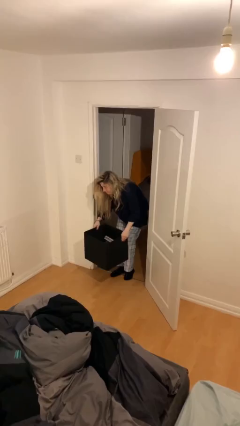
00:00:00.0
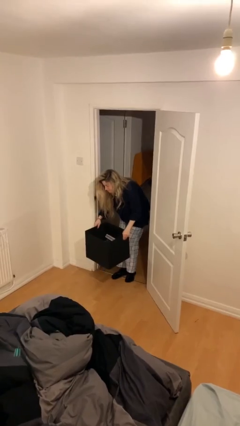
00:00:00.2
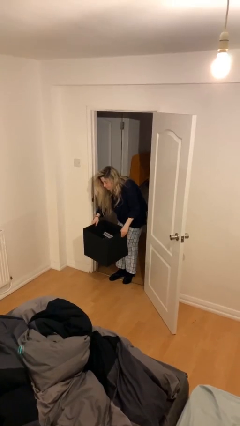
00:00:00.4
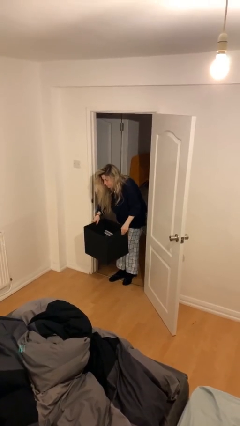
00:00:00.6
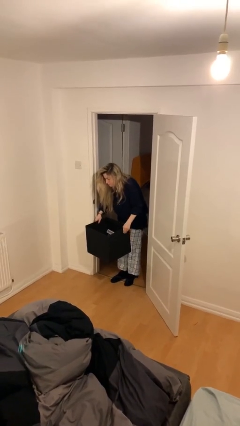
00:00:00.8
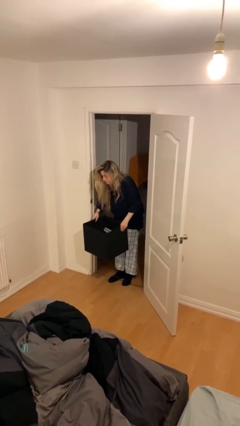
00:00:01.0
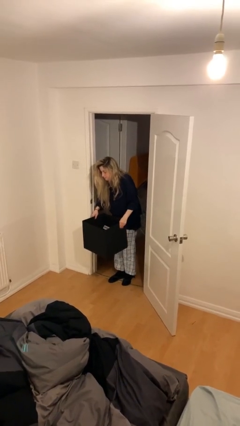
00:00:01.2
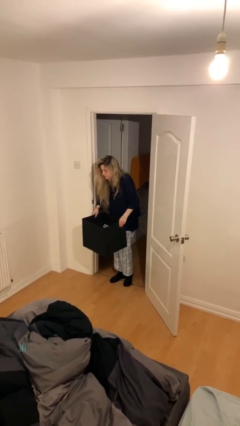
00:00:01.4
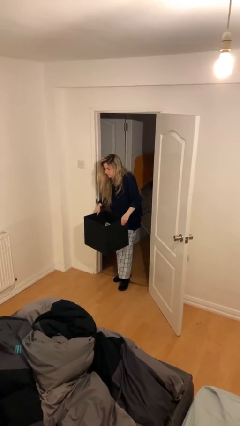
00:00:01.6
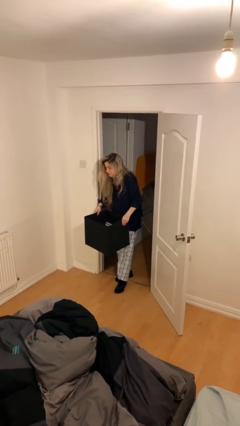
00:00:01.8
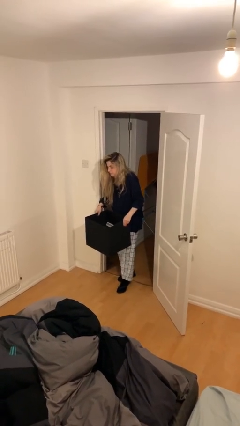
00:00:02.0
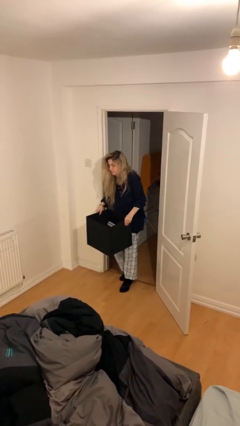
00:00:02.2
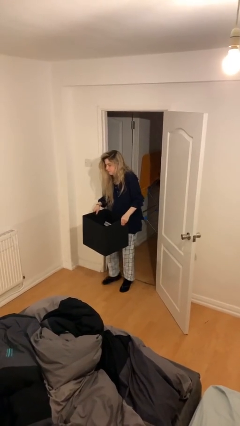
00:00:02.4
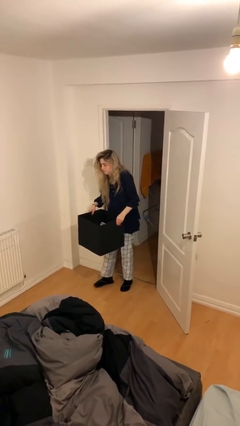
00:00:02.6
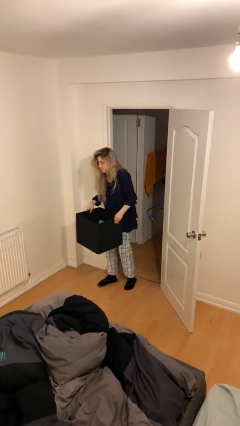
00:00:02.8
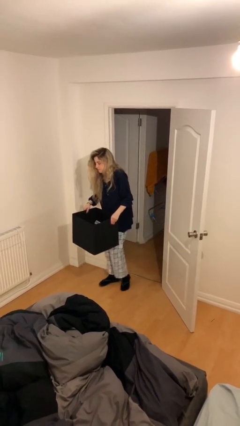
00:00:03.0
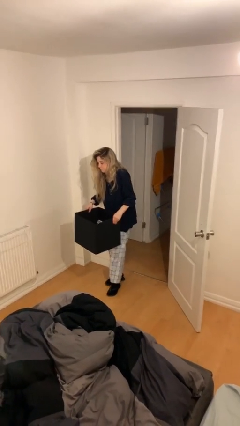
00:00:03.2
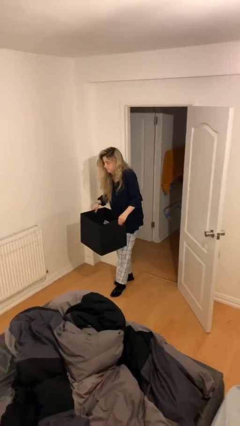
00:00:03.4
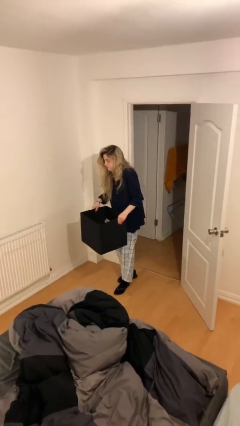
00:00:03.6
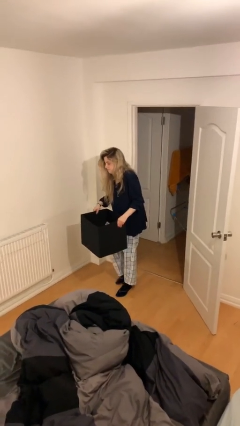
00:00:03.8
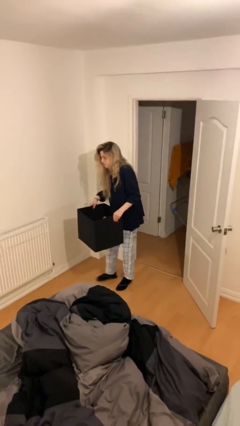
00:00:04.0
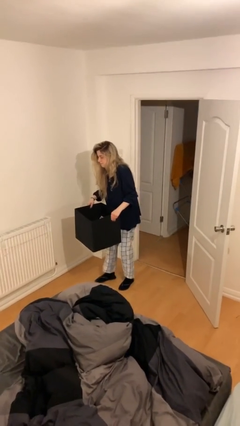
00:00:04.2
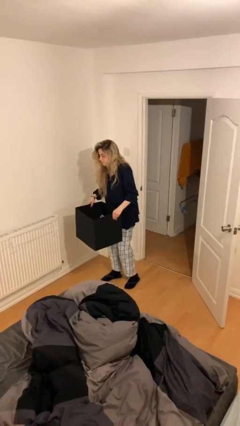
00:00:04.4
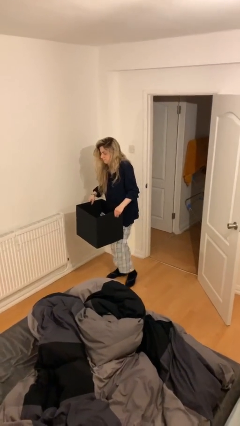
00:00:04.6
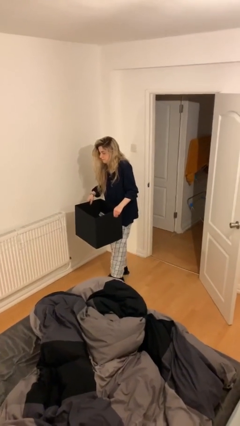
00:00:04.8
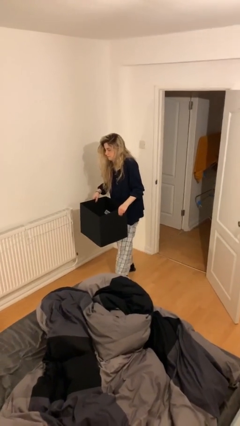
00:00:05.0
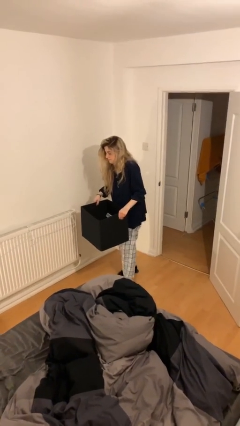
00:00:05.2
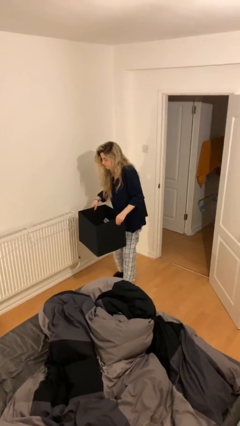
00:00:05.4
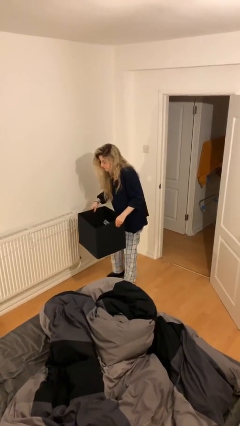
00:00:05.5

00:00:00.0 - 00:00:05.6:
person carries heavy object

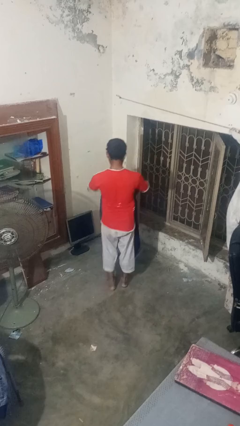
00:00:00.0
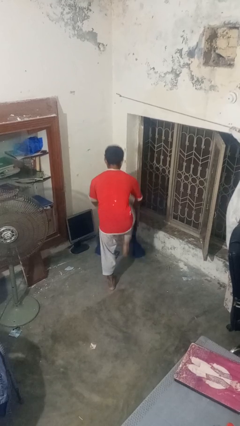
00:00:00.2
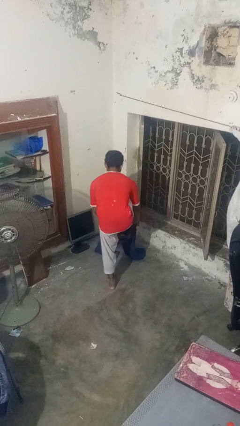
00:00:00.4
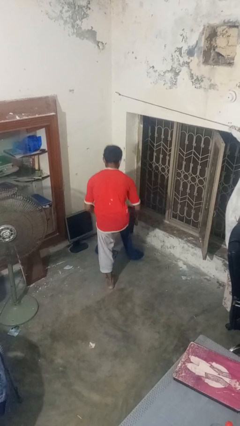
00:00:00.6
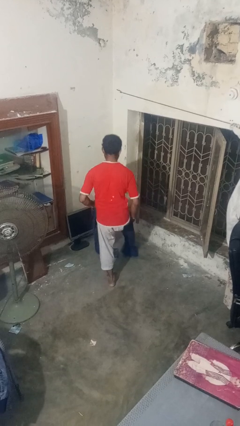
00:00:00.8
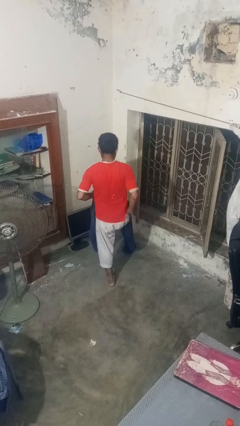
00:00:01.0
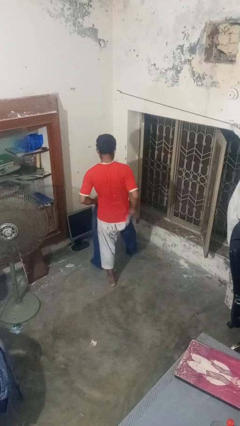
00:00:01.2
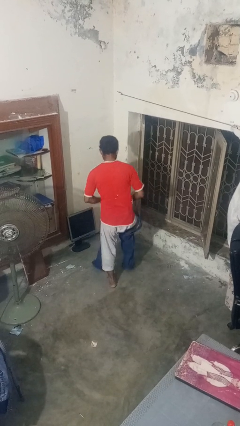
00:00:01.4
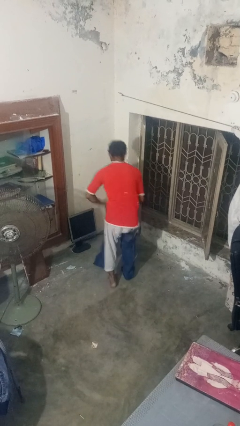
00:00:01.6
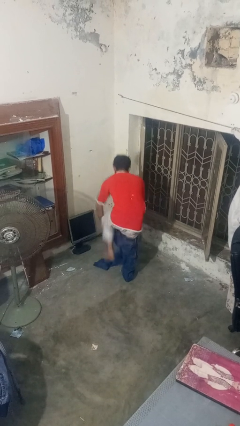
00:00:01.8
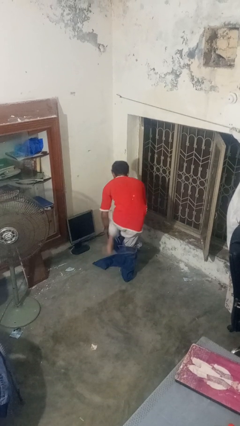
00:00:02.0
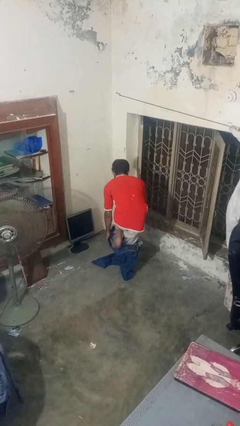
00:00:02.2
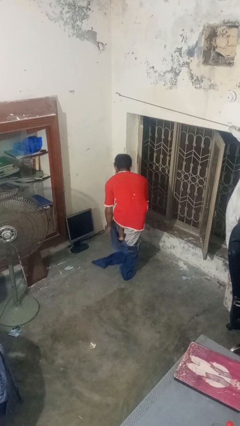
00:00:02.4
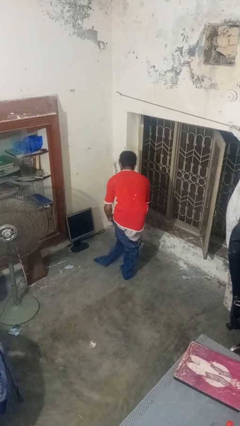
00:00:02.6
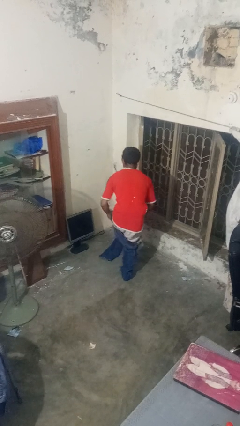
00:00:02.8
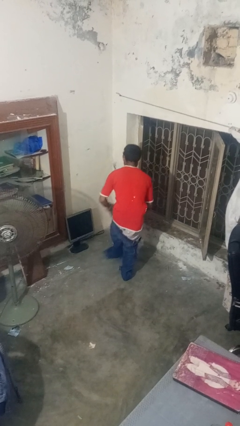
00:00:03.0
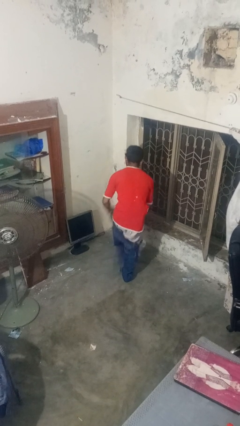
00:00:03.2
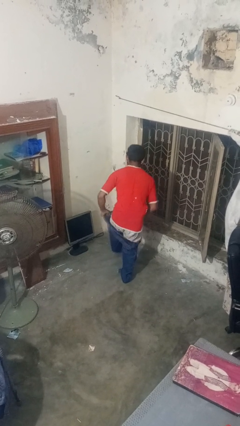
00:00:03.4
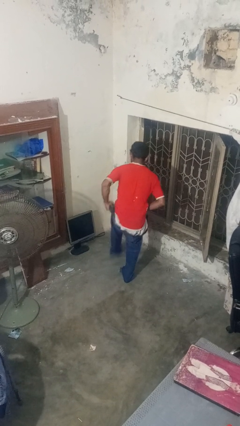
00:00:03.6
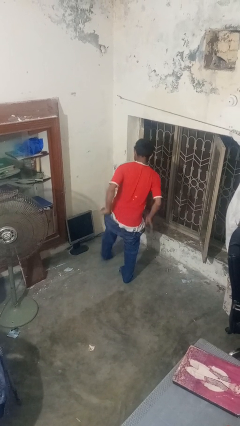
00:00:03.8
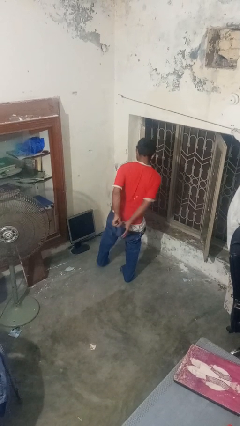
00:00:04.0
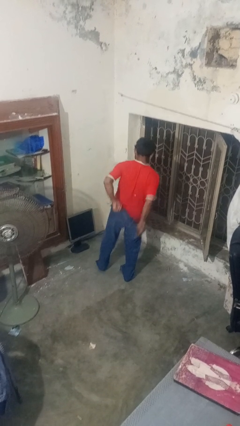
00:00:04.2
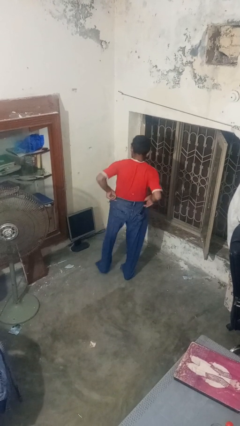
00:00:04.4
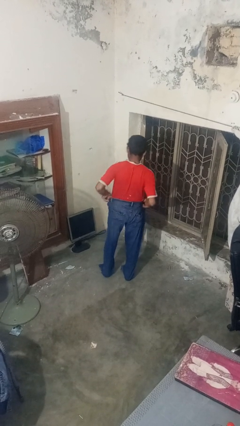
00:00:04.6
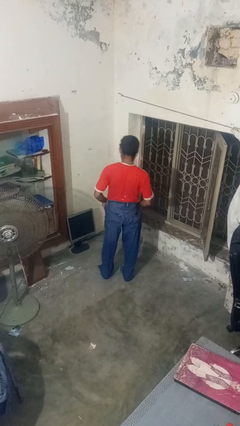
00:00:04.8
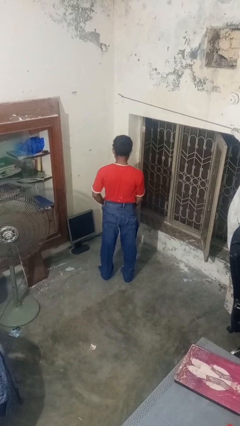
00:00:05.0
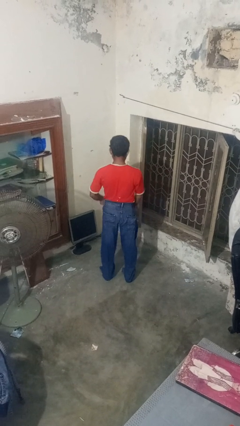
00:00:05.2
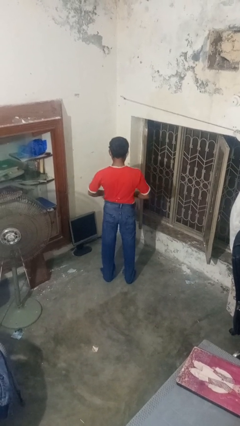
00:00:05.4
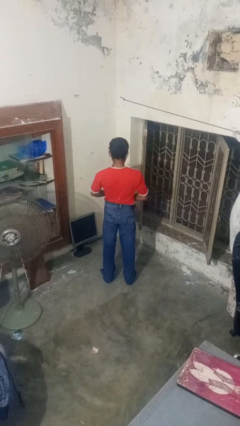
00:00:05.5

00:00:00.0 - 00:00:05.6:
person puts on pants

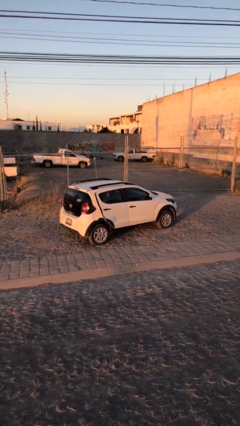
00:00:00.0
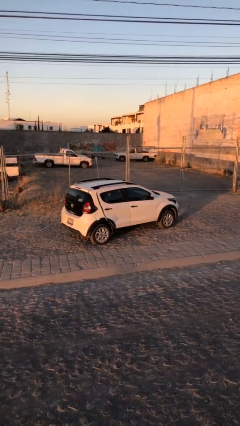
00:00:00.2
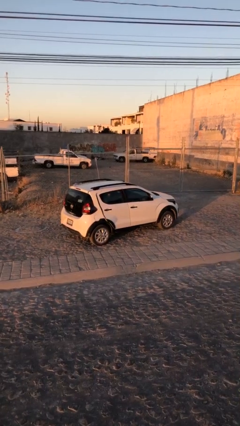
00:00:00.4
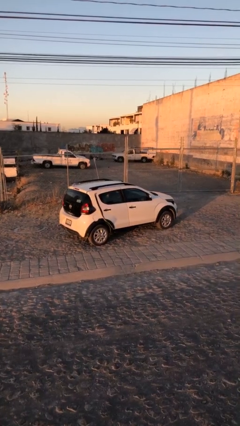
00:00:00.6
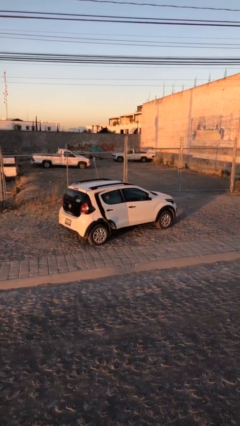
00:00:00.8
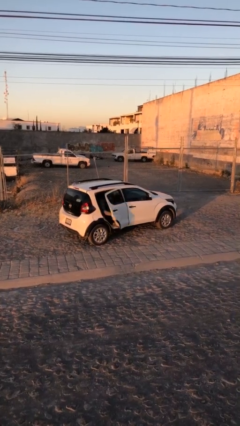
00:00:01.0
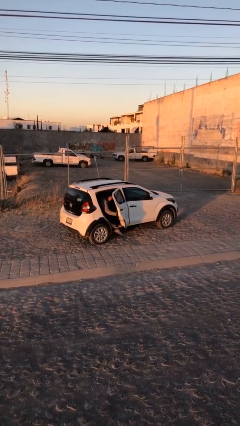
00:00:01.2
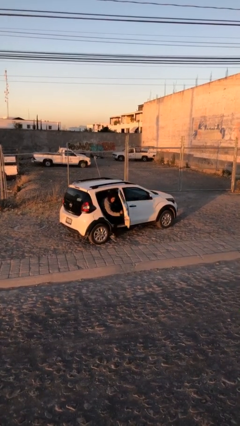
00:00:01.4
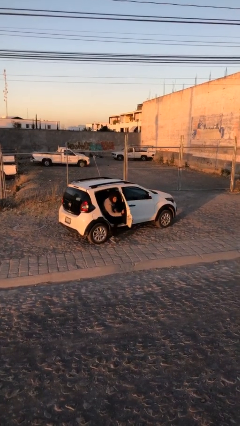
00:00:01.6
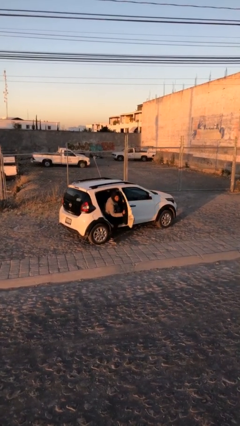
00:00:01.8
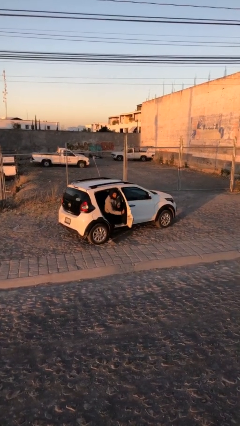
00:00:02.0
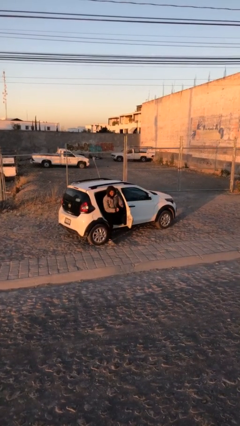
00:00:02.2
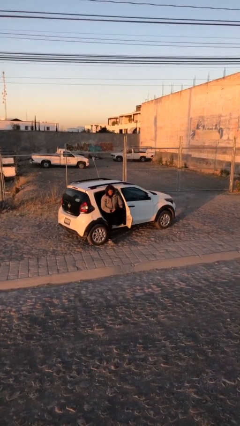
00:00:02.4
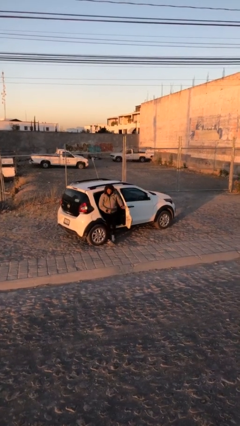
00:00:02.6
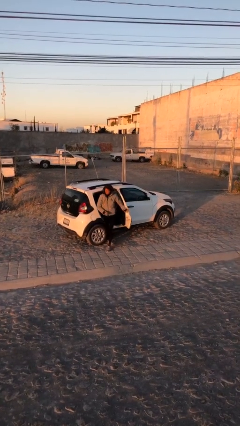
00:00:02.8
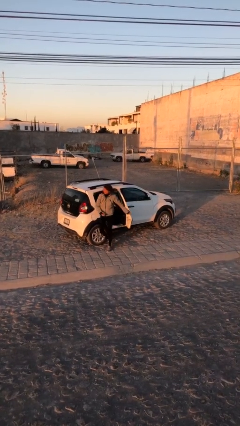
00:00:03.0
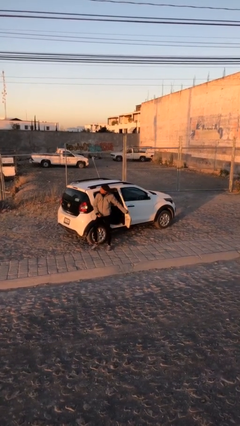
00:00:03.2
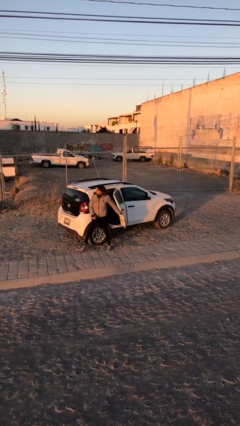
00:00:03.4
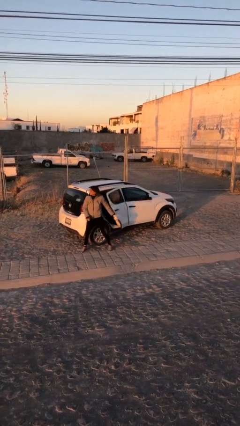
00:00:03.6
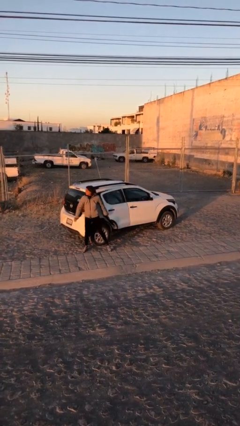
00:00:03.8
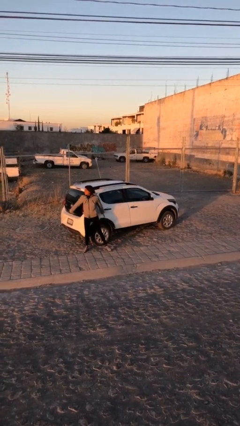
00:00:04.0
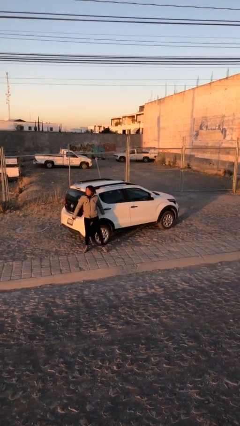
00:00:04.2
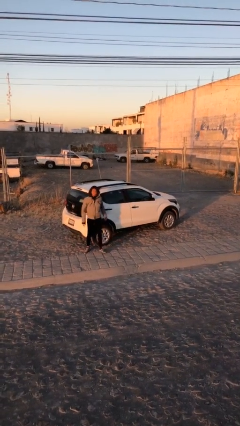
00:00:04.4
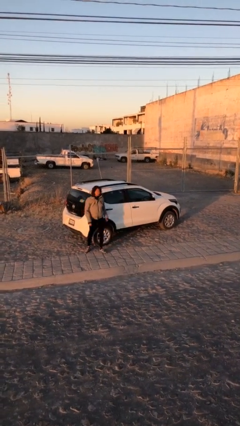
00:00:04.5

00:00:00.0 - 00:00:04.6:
car drops off person

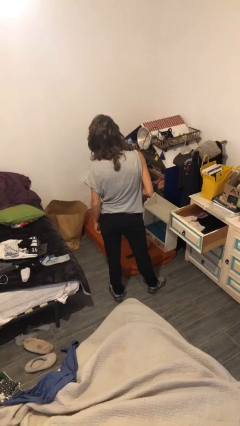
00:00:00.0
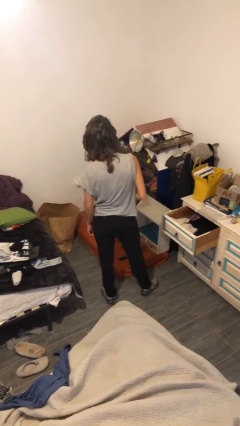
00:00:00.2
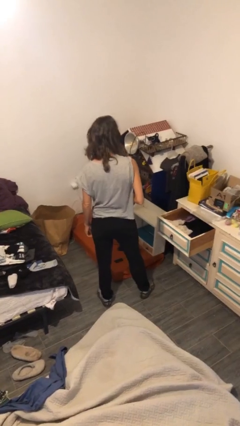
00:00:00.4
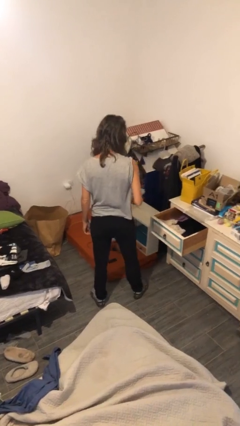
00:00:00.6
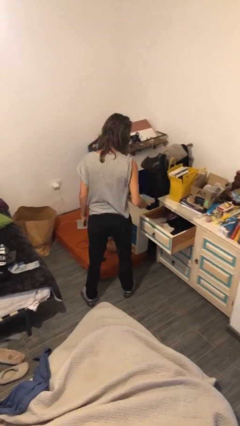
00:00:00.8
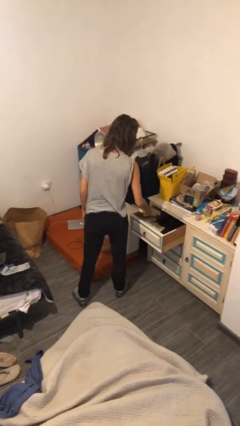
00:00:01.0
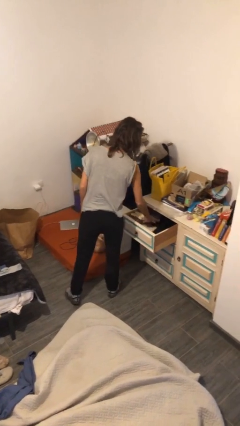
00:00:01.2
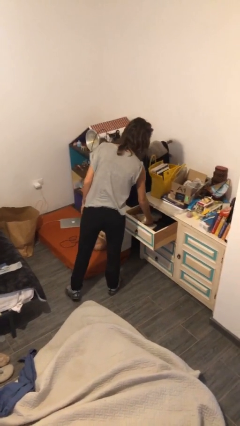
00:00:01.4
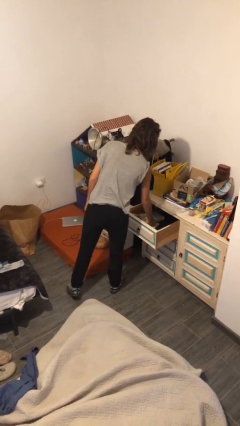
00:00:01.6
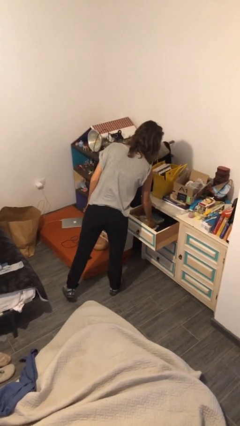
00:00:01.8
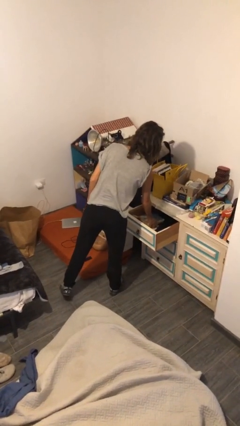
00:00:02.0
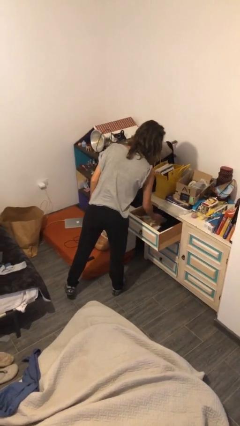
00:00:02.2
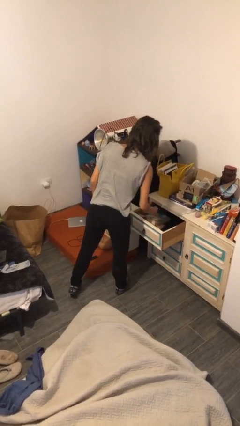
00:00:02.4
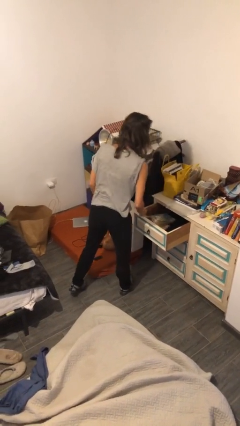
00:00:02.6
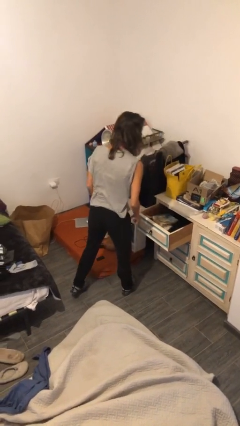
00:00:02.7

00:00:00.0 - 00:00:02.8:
person puts down object into cabinet
